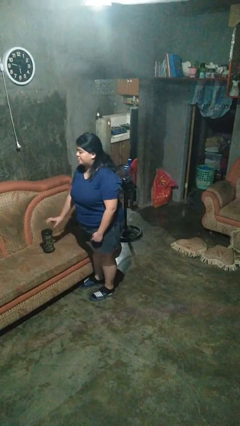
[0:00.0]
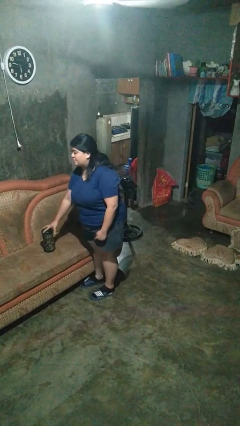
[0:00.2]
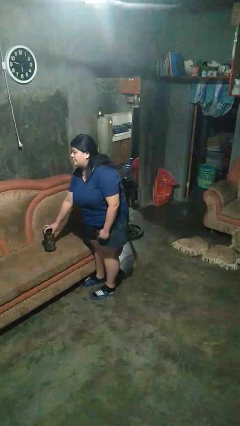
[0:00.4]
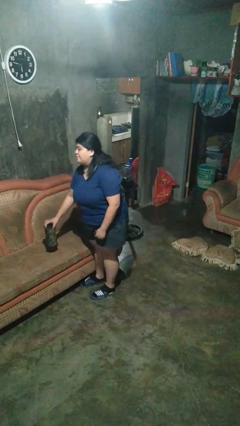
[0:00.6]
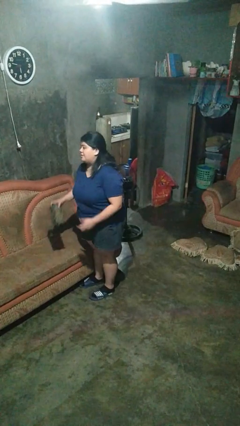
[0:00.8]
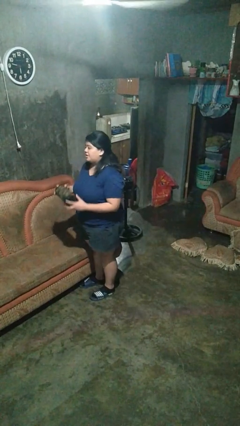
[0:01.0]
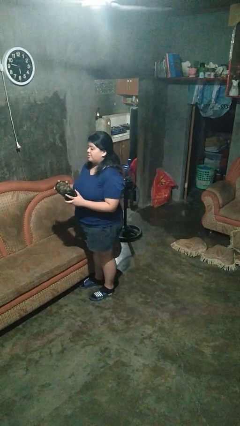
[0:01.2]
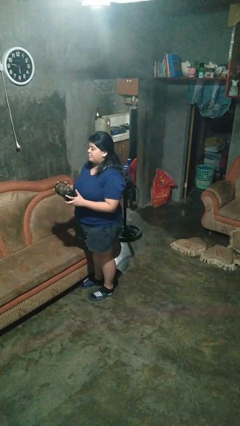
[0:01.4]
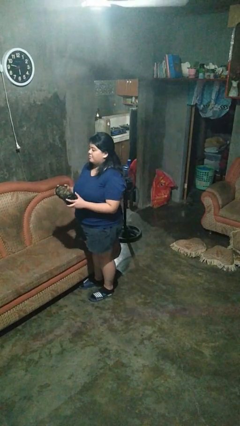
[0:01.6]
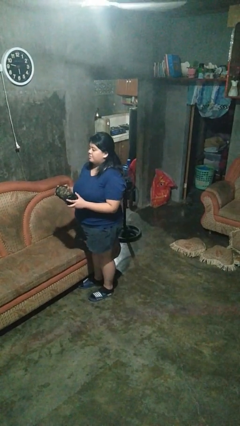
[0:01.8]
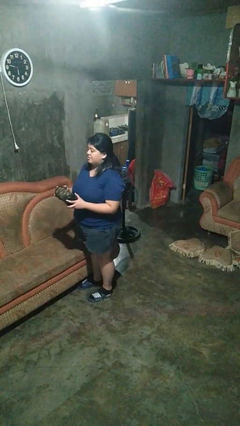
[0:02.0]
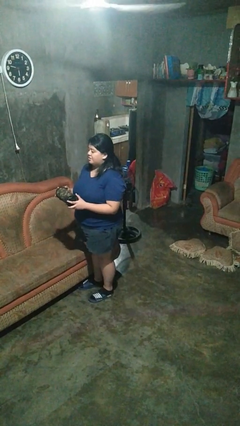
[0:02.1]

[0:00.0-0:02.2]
person picks up object from couch

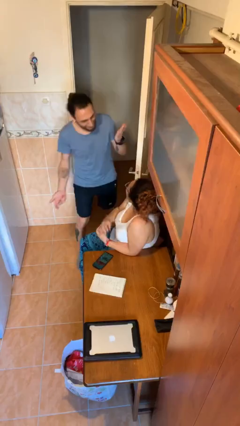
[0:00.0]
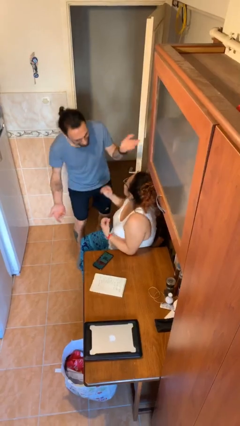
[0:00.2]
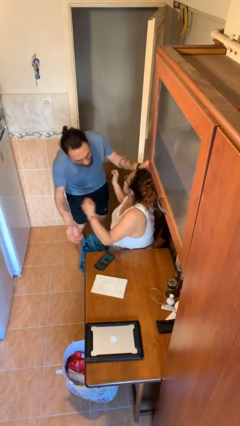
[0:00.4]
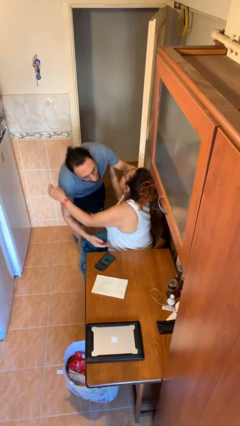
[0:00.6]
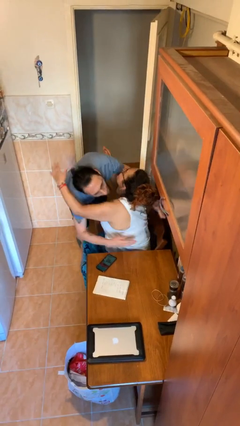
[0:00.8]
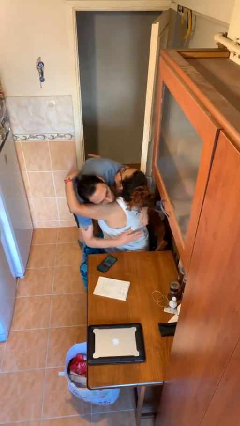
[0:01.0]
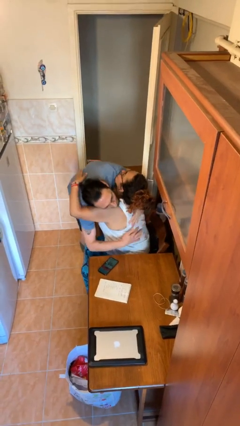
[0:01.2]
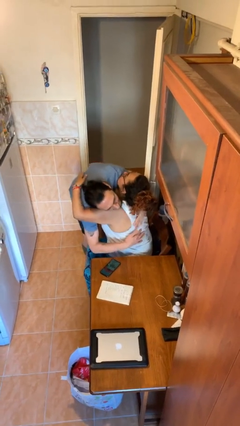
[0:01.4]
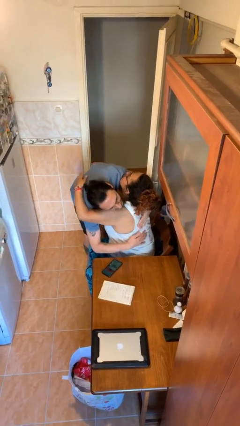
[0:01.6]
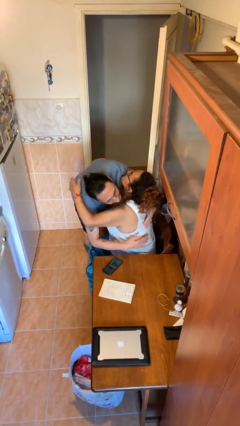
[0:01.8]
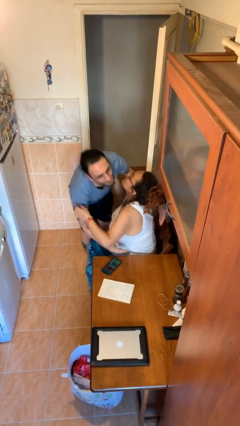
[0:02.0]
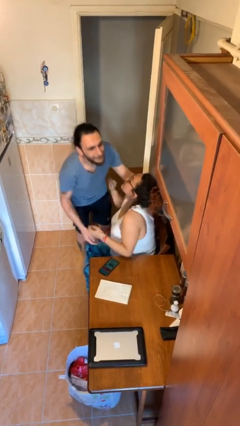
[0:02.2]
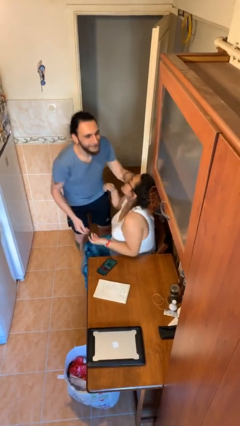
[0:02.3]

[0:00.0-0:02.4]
person embraces person

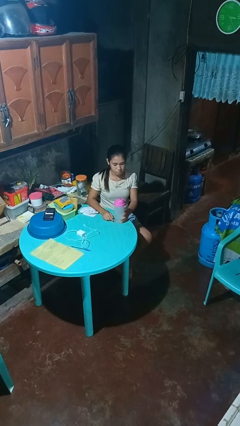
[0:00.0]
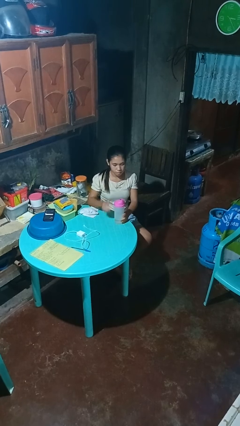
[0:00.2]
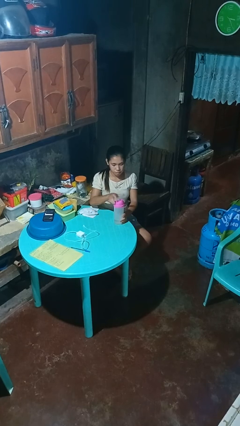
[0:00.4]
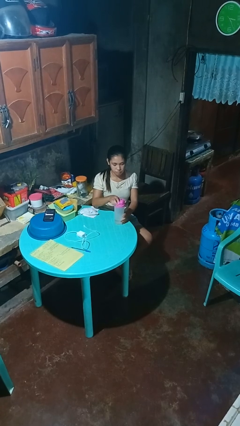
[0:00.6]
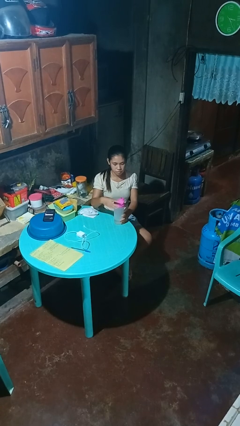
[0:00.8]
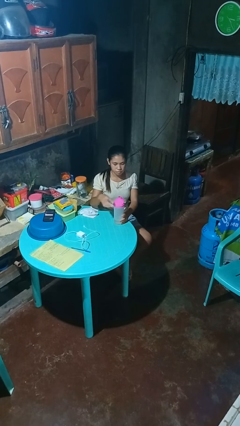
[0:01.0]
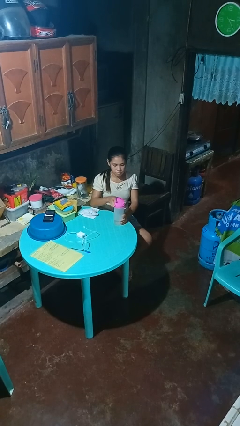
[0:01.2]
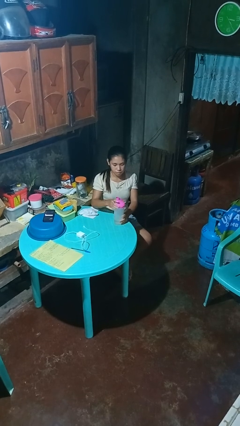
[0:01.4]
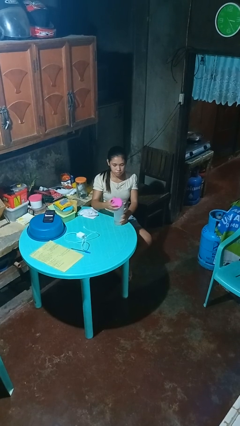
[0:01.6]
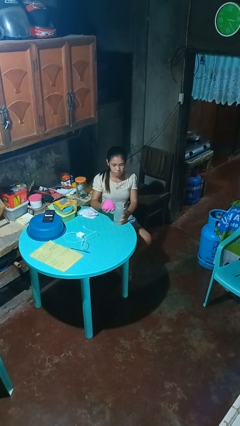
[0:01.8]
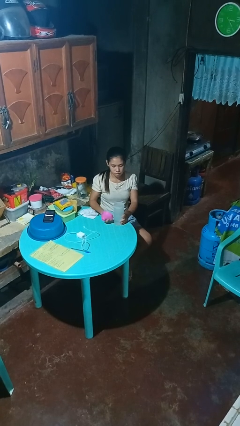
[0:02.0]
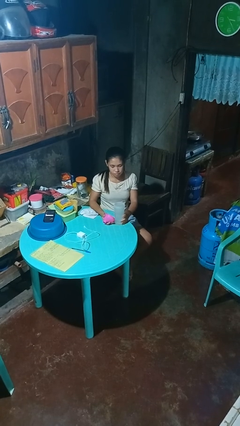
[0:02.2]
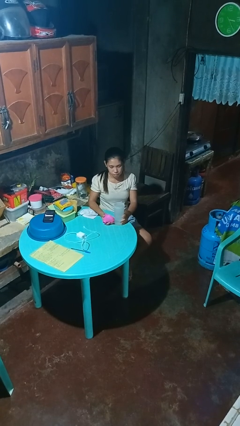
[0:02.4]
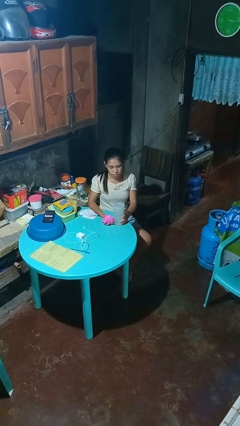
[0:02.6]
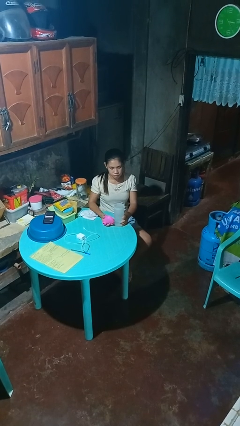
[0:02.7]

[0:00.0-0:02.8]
person unscrews lid from bottle

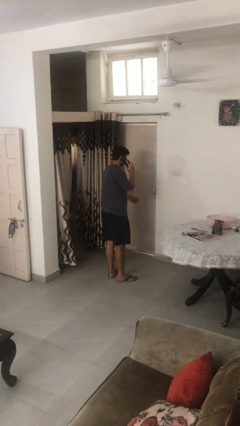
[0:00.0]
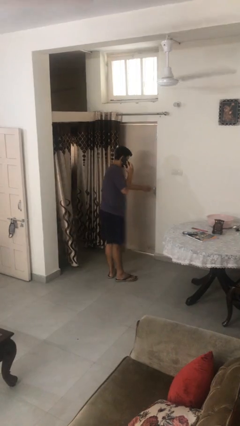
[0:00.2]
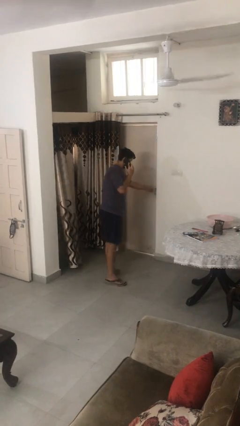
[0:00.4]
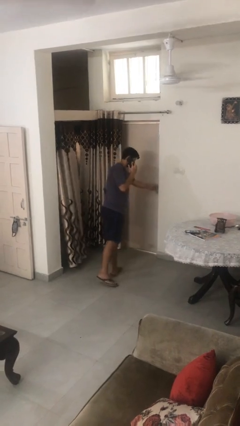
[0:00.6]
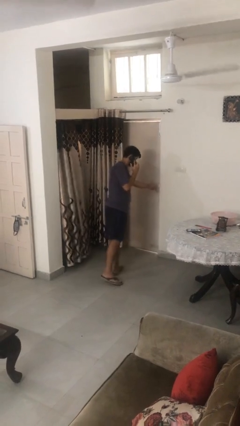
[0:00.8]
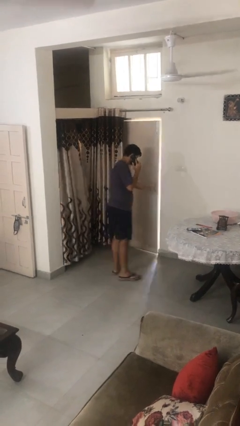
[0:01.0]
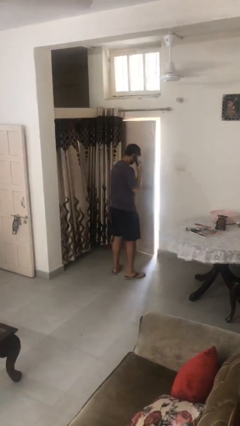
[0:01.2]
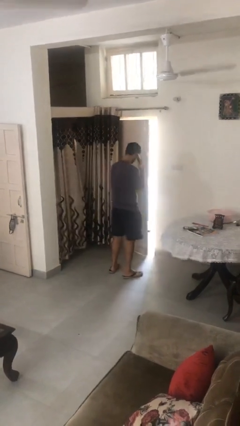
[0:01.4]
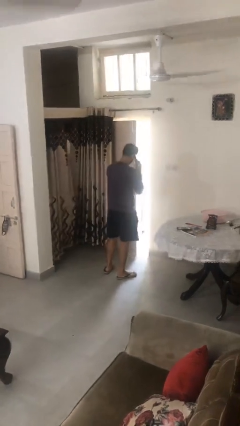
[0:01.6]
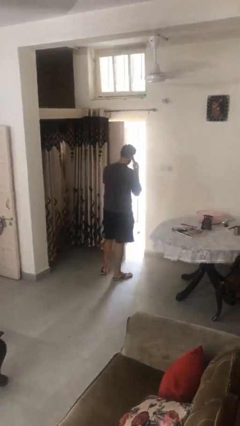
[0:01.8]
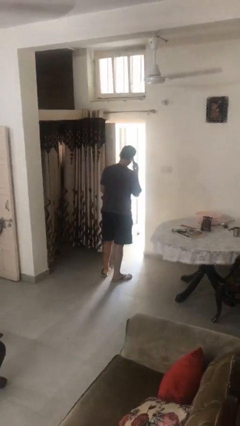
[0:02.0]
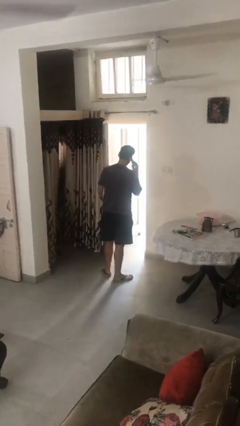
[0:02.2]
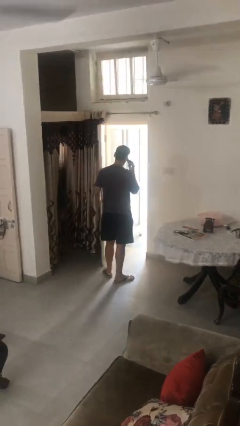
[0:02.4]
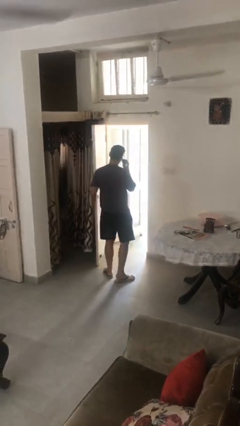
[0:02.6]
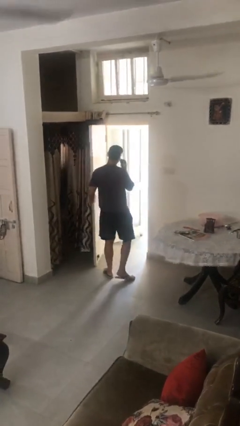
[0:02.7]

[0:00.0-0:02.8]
person opens facility door

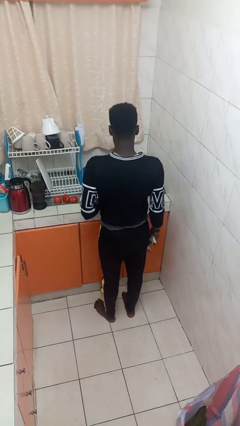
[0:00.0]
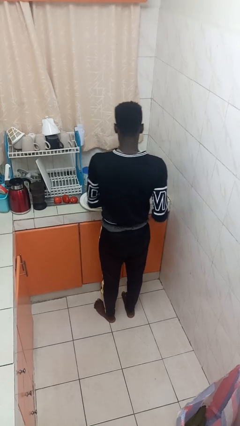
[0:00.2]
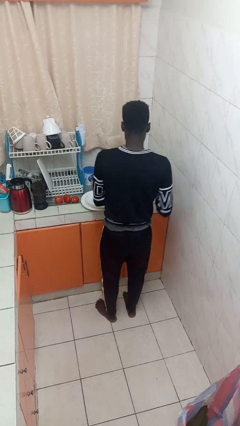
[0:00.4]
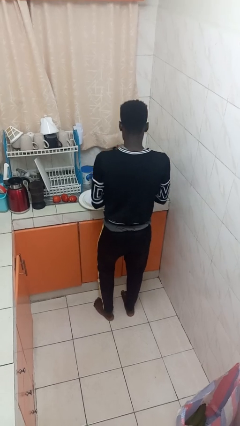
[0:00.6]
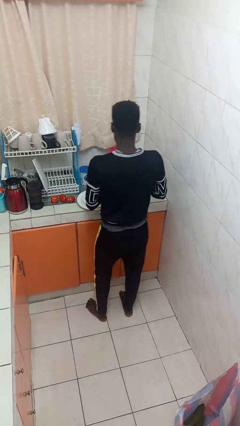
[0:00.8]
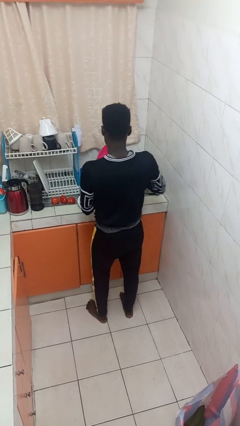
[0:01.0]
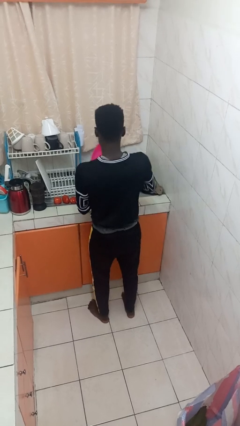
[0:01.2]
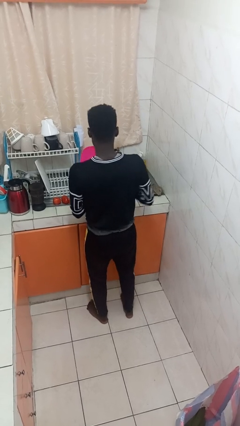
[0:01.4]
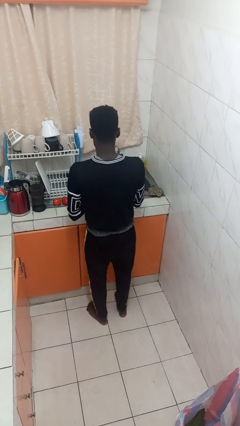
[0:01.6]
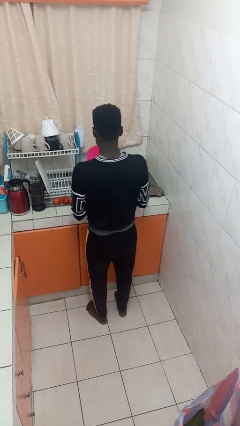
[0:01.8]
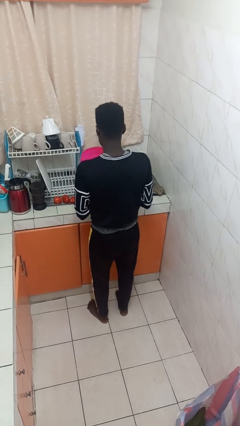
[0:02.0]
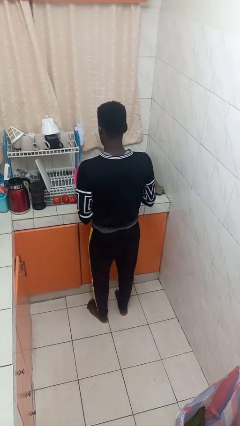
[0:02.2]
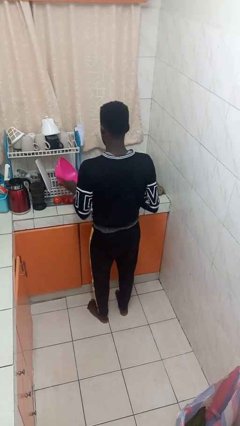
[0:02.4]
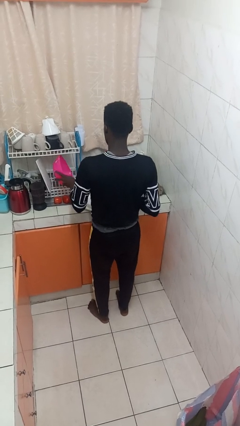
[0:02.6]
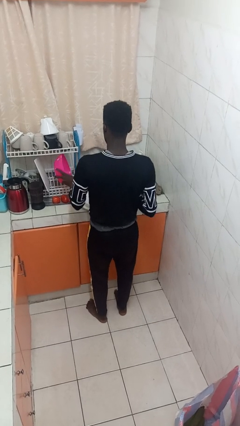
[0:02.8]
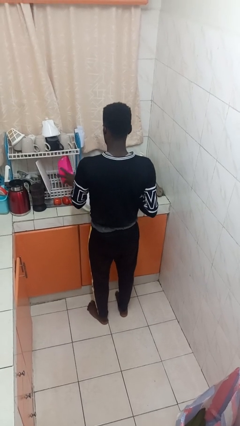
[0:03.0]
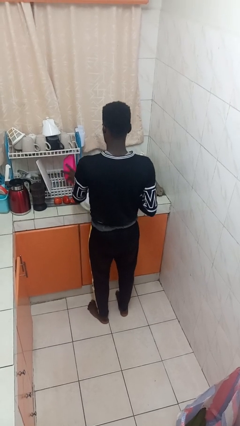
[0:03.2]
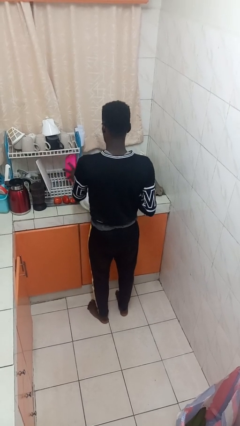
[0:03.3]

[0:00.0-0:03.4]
person dries dish

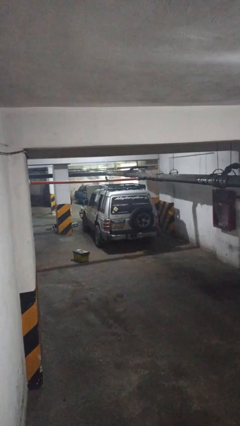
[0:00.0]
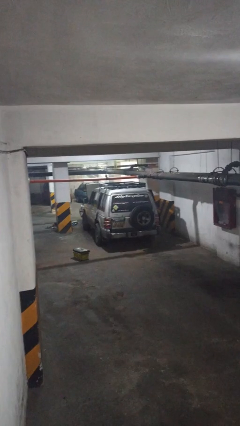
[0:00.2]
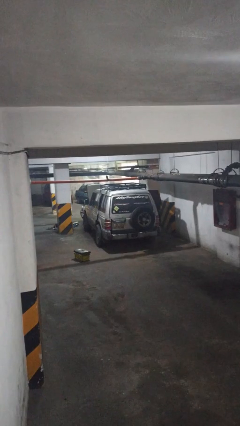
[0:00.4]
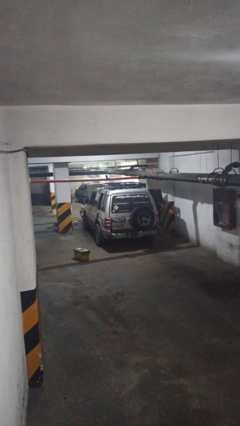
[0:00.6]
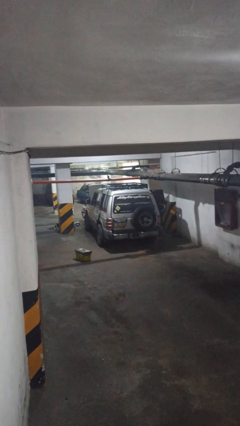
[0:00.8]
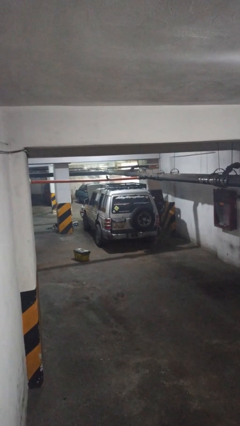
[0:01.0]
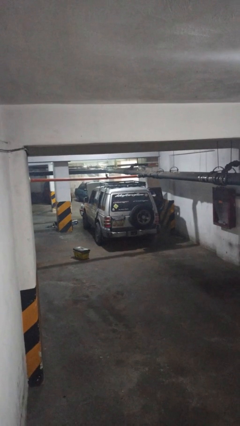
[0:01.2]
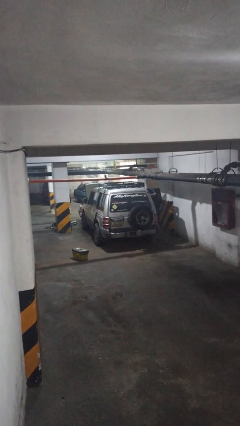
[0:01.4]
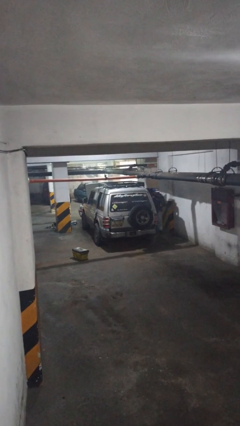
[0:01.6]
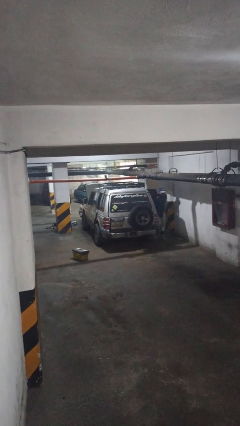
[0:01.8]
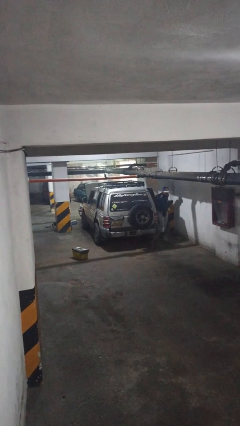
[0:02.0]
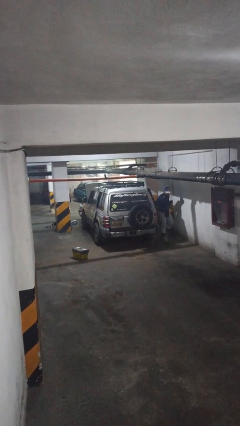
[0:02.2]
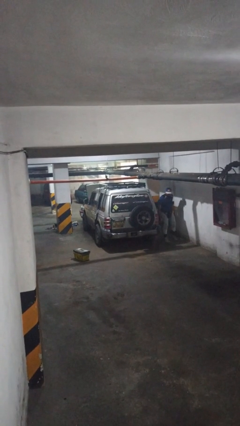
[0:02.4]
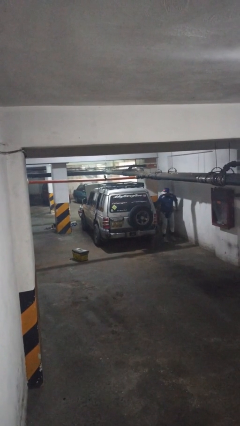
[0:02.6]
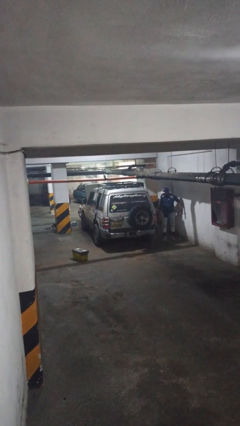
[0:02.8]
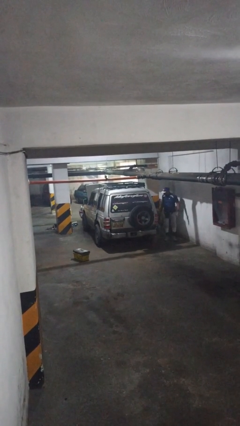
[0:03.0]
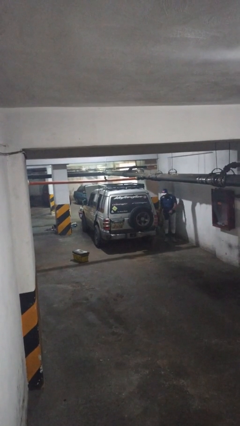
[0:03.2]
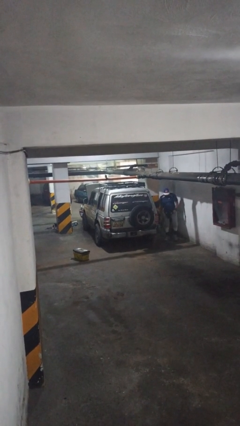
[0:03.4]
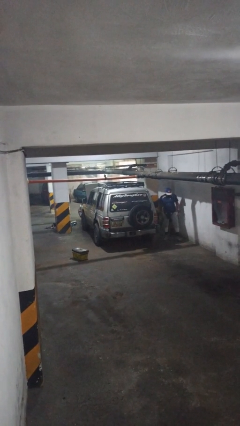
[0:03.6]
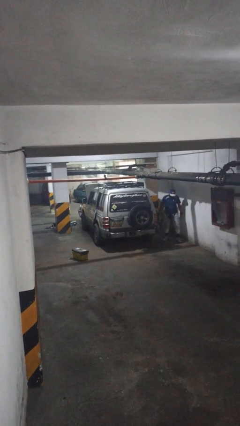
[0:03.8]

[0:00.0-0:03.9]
car drops off person
